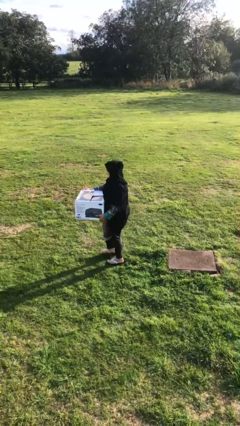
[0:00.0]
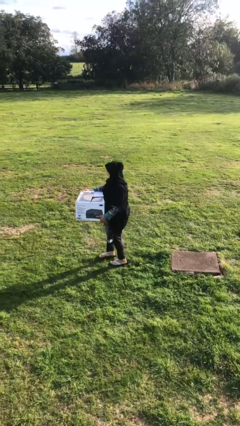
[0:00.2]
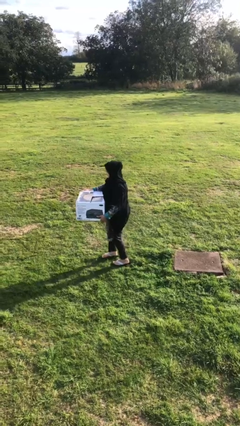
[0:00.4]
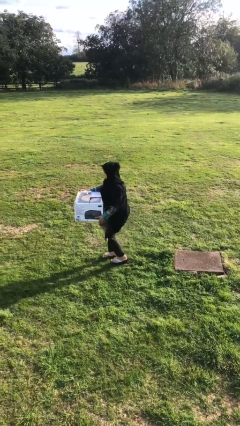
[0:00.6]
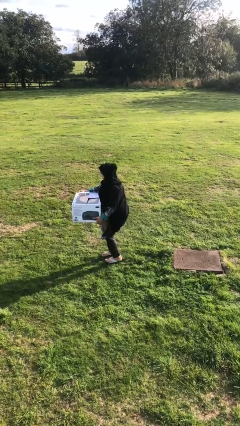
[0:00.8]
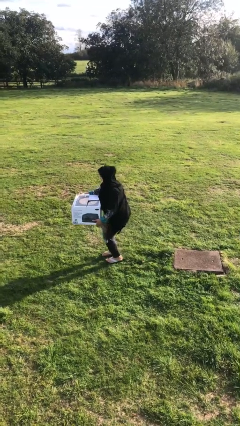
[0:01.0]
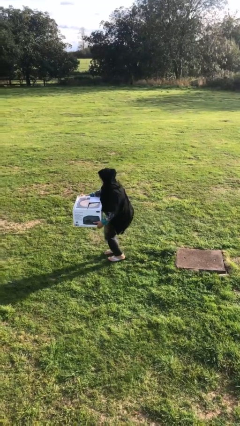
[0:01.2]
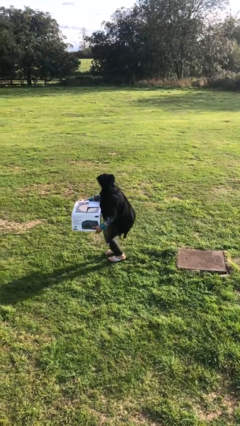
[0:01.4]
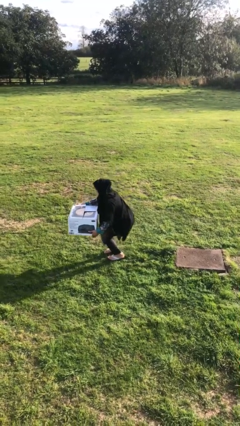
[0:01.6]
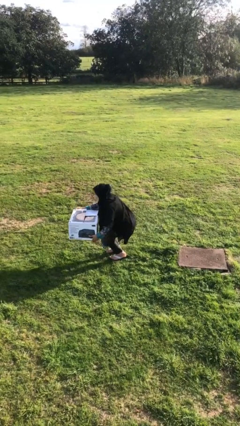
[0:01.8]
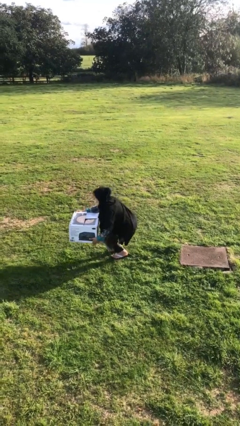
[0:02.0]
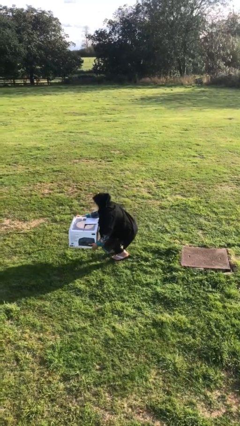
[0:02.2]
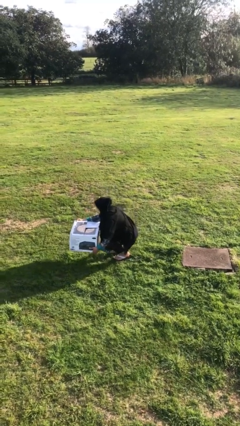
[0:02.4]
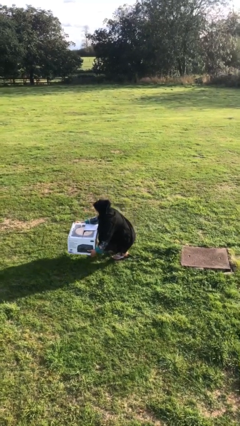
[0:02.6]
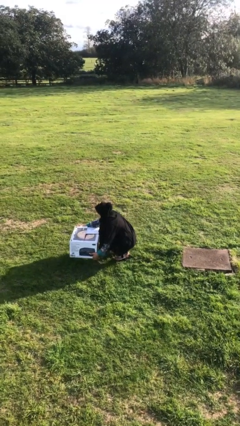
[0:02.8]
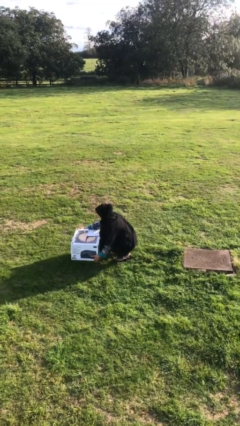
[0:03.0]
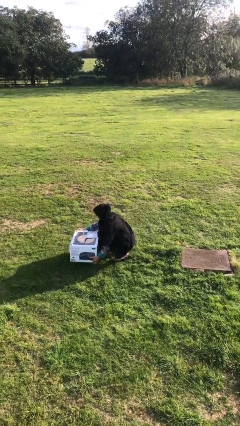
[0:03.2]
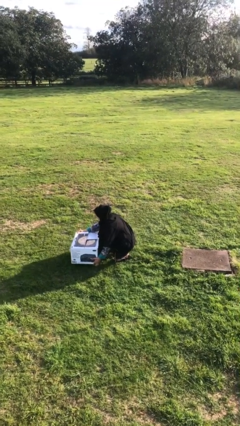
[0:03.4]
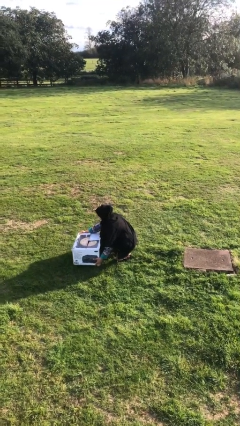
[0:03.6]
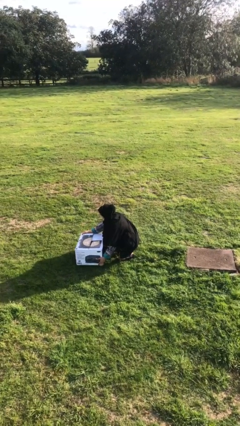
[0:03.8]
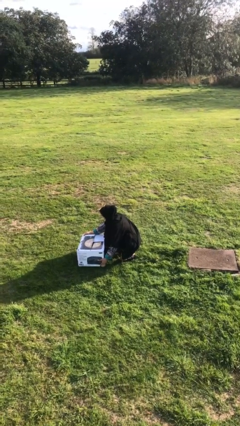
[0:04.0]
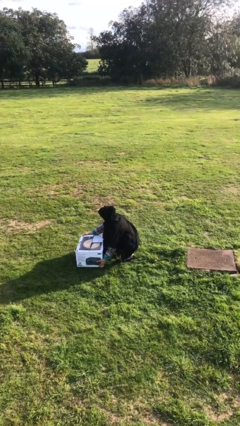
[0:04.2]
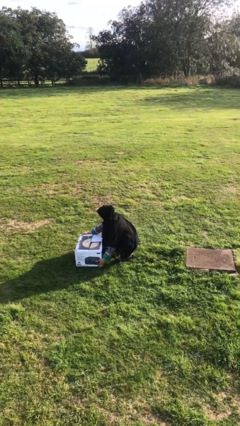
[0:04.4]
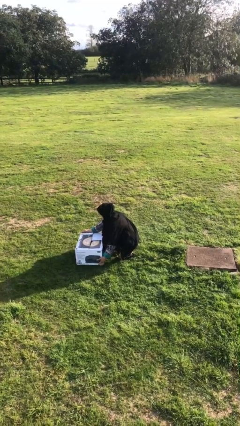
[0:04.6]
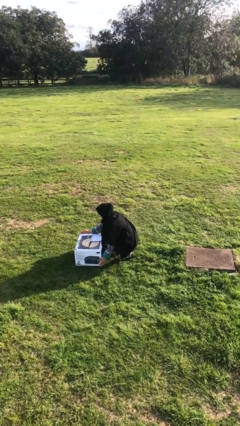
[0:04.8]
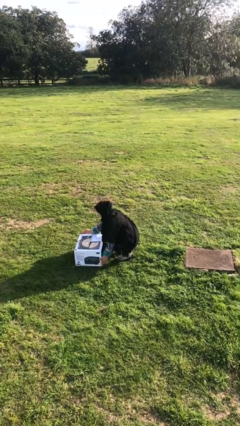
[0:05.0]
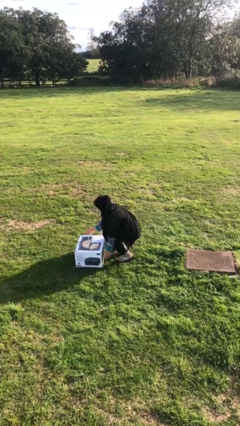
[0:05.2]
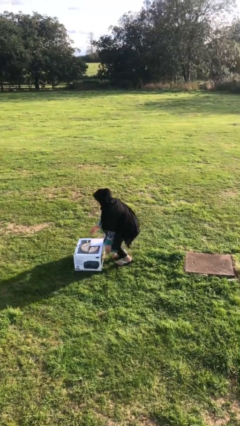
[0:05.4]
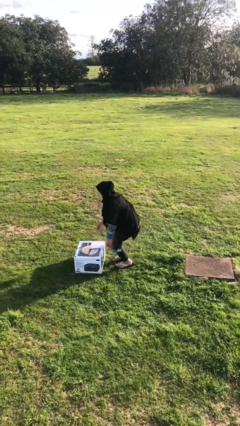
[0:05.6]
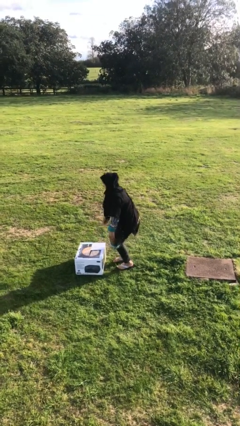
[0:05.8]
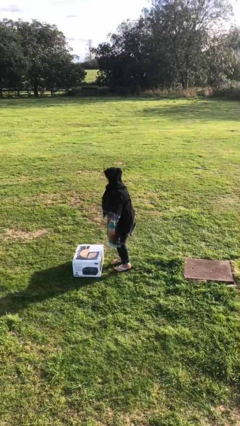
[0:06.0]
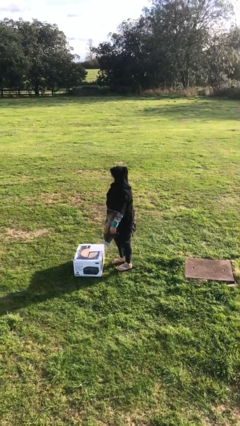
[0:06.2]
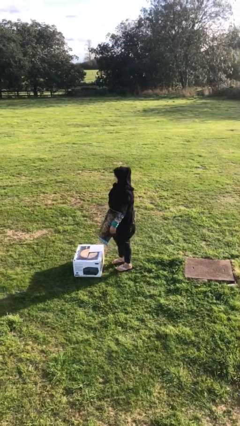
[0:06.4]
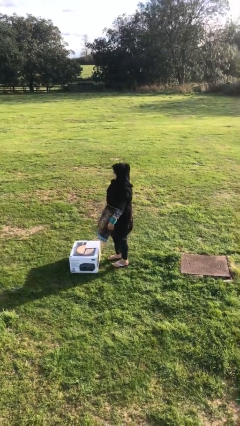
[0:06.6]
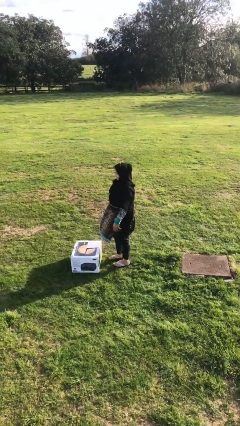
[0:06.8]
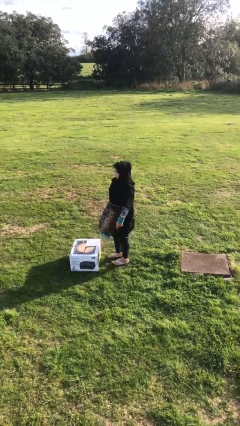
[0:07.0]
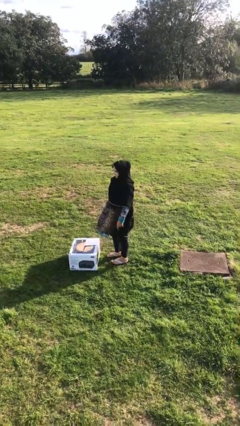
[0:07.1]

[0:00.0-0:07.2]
person puts down object on floor

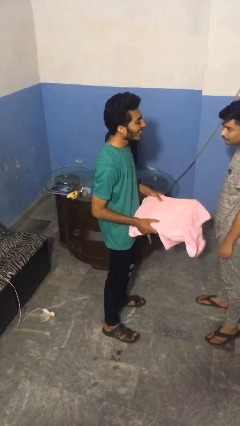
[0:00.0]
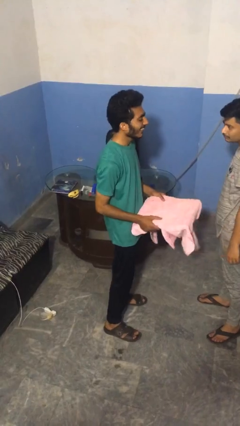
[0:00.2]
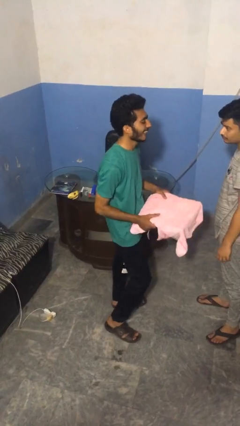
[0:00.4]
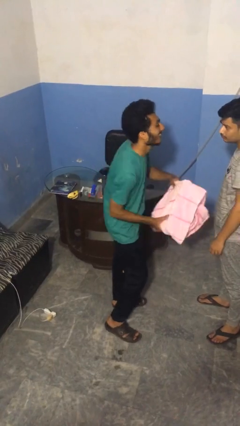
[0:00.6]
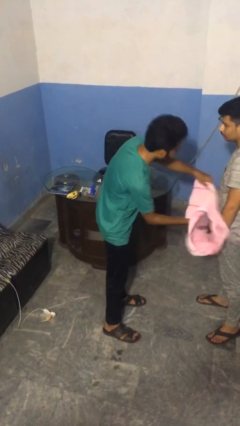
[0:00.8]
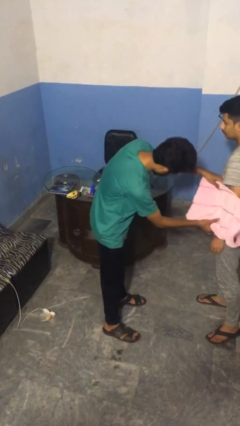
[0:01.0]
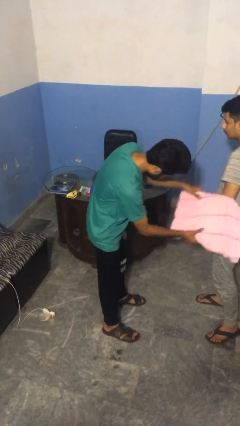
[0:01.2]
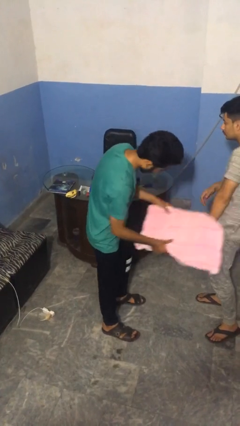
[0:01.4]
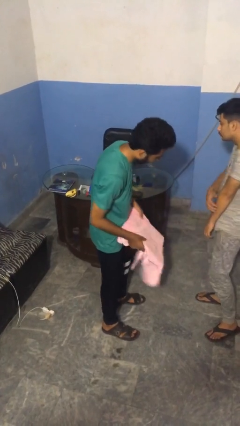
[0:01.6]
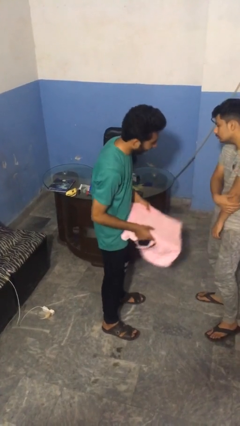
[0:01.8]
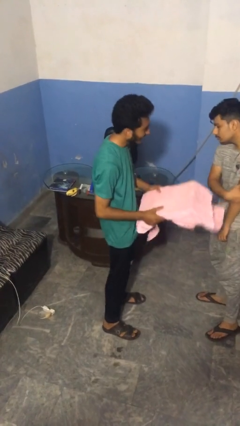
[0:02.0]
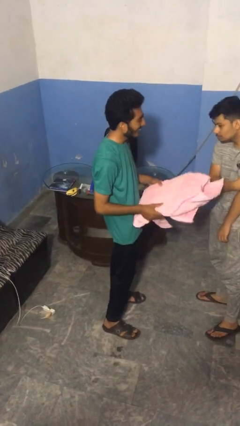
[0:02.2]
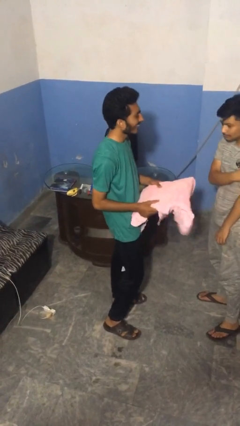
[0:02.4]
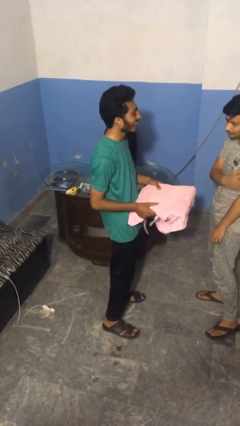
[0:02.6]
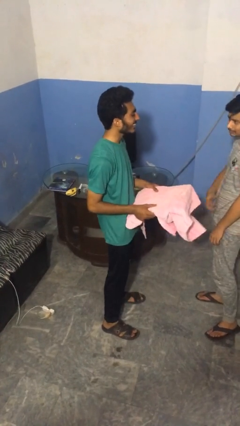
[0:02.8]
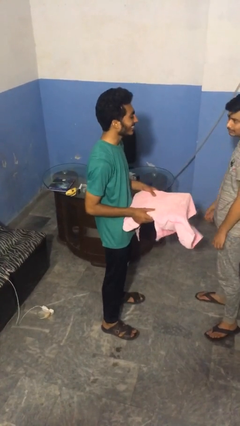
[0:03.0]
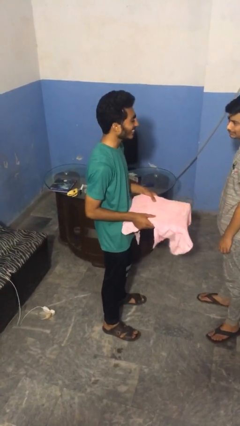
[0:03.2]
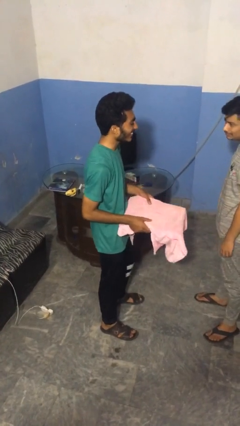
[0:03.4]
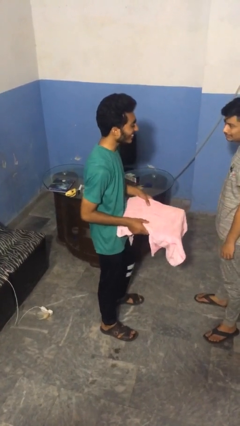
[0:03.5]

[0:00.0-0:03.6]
person hits person with pillow

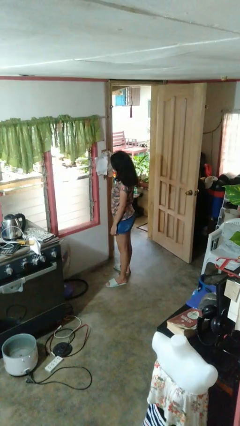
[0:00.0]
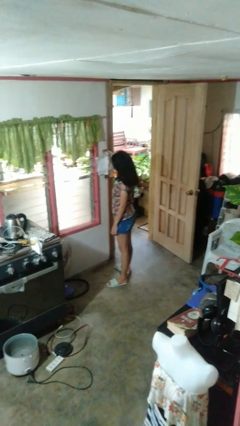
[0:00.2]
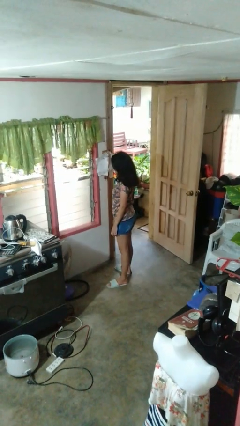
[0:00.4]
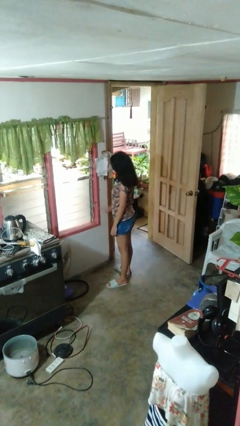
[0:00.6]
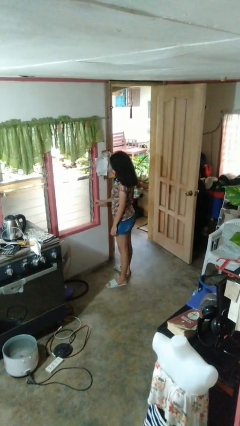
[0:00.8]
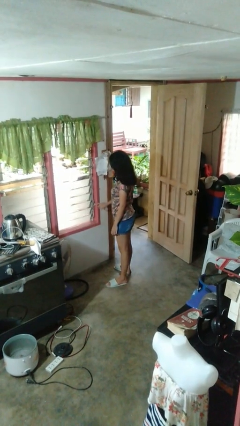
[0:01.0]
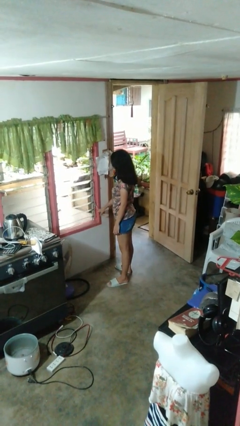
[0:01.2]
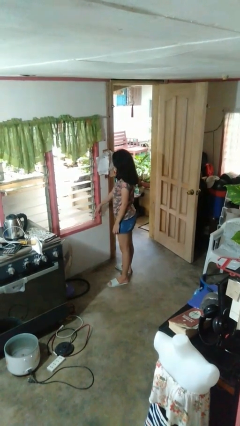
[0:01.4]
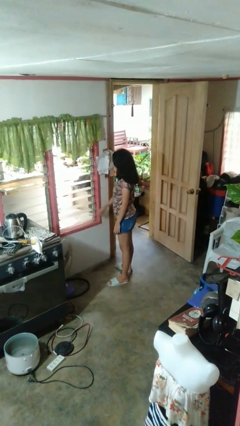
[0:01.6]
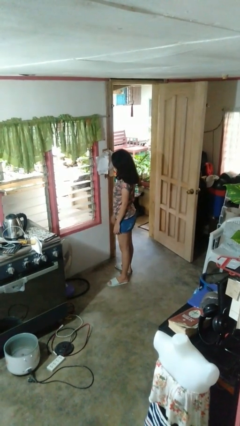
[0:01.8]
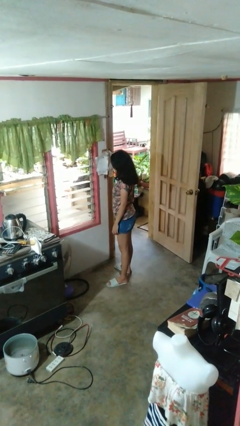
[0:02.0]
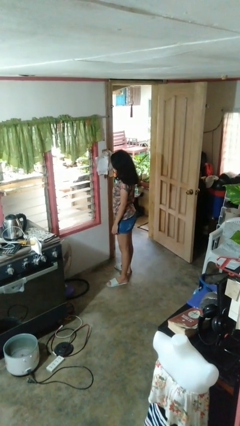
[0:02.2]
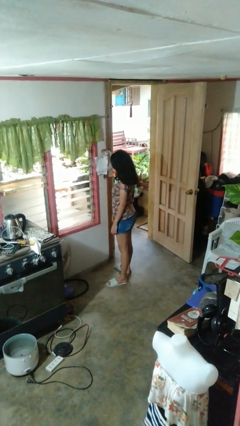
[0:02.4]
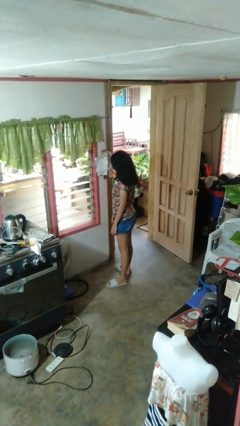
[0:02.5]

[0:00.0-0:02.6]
person opens home window

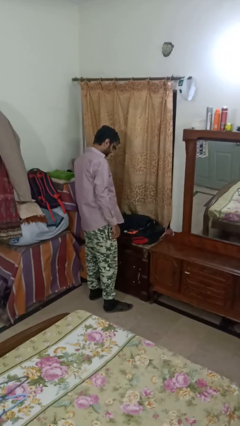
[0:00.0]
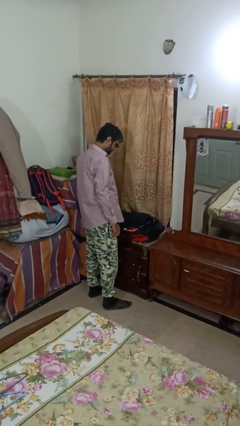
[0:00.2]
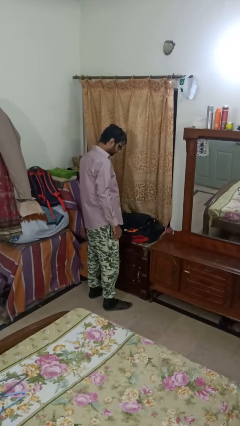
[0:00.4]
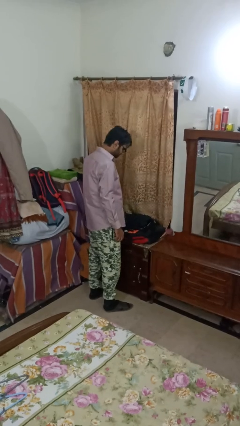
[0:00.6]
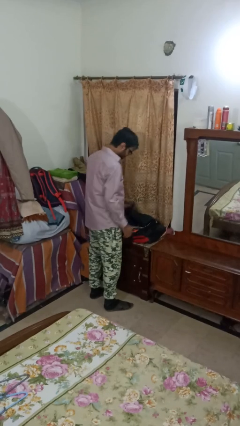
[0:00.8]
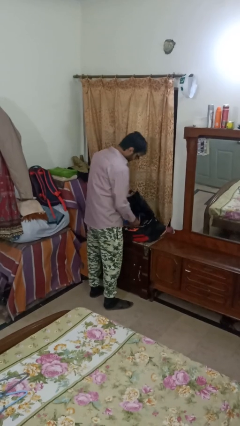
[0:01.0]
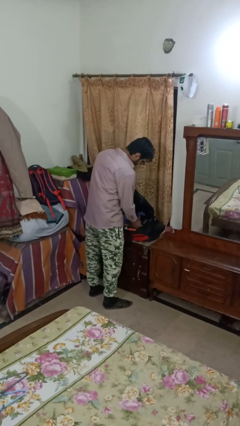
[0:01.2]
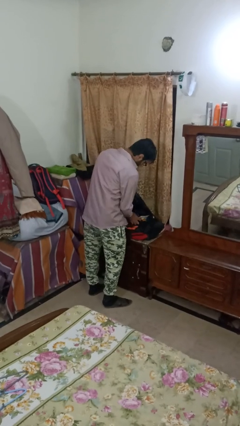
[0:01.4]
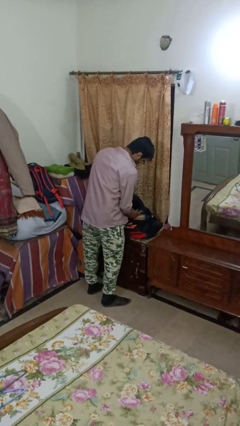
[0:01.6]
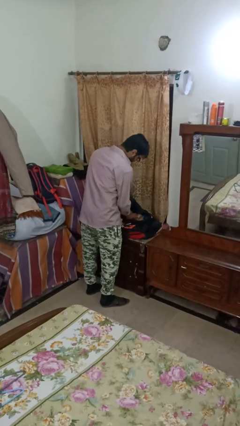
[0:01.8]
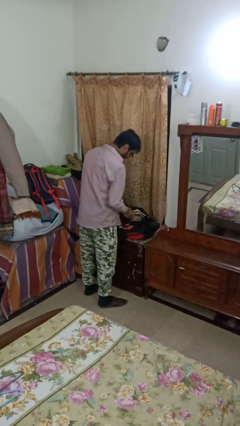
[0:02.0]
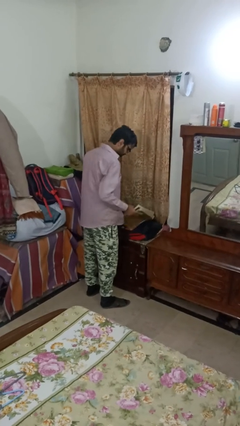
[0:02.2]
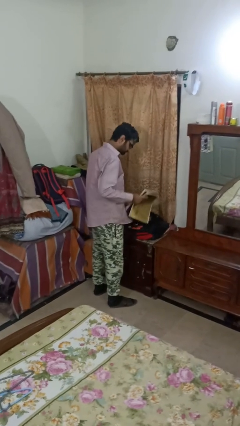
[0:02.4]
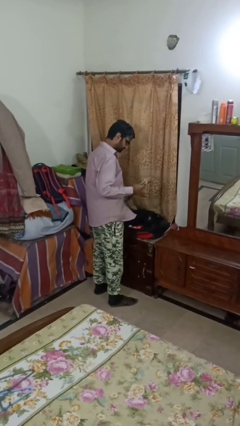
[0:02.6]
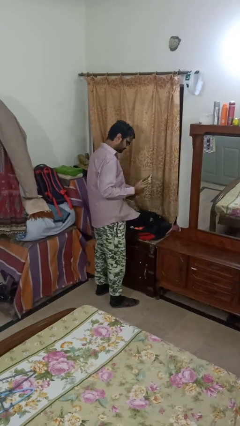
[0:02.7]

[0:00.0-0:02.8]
person takes object from bag

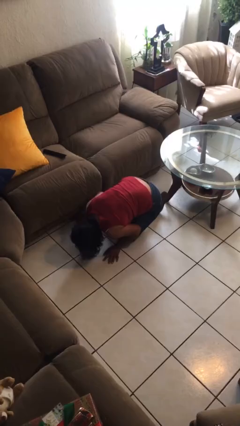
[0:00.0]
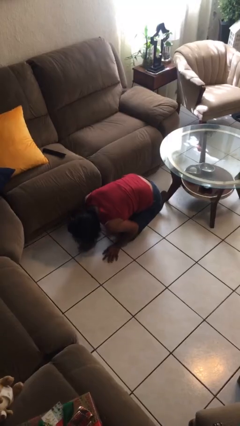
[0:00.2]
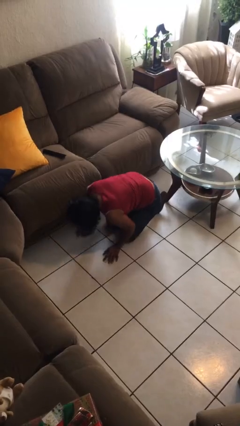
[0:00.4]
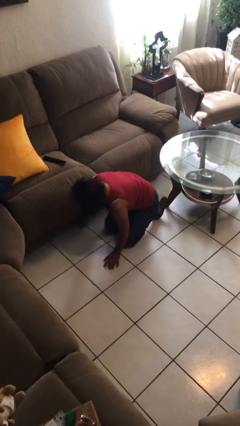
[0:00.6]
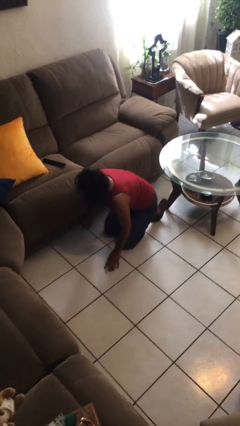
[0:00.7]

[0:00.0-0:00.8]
person searches under couch

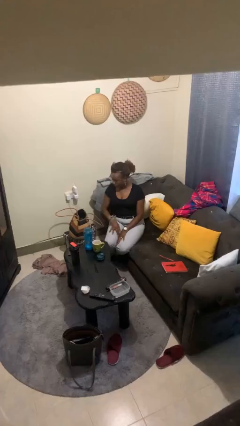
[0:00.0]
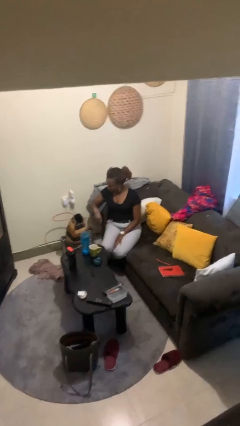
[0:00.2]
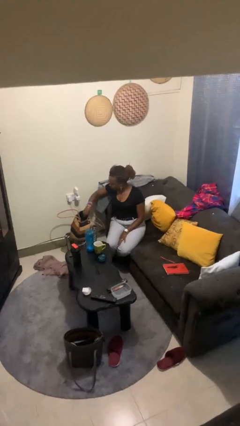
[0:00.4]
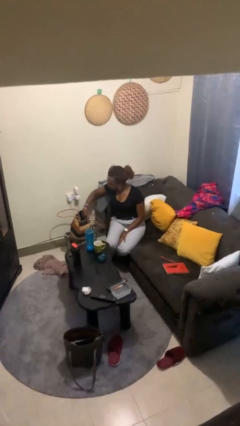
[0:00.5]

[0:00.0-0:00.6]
person searches in purse
